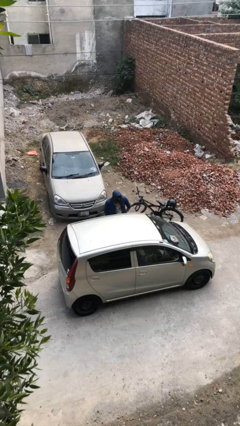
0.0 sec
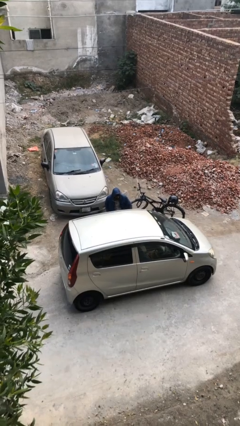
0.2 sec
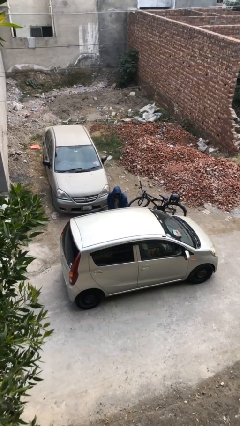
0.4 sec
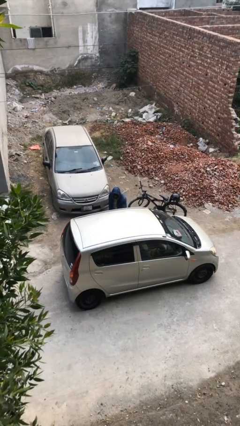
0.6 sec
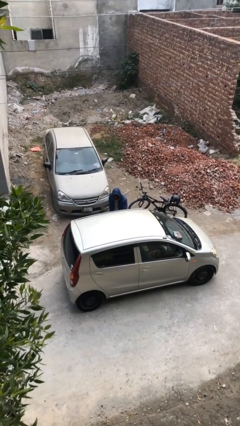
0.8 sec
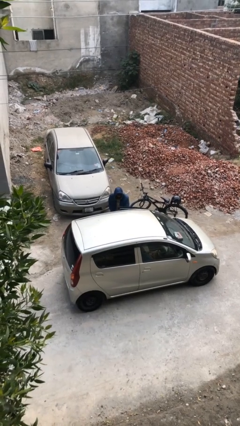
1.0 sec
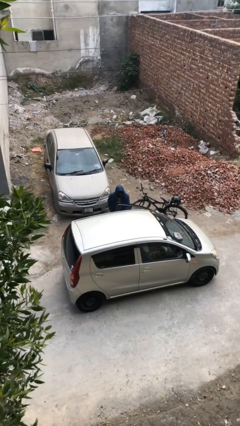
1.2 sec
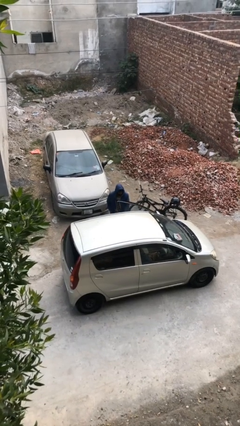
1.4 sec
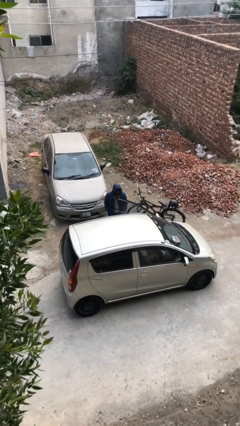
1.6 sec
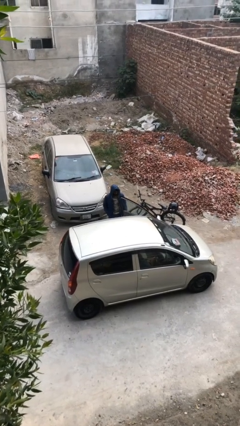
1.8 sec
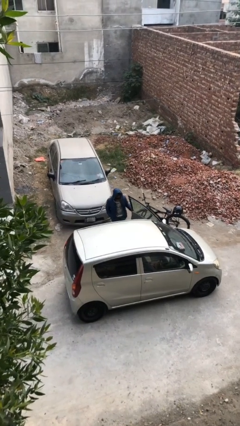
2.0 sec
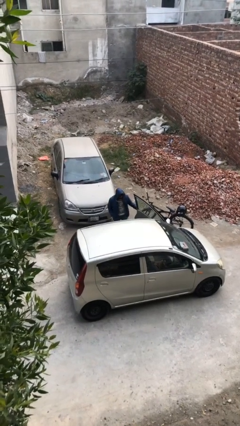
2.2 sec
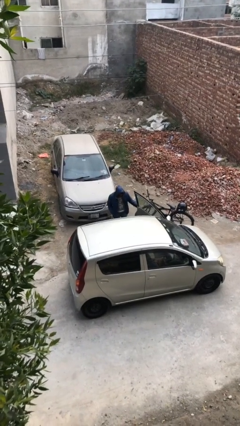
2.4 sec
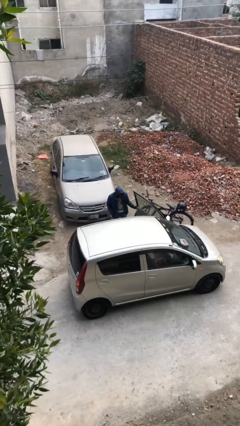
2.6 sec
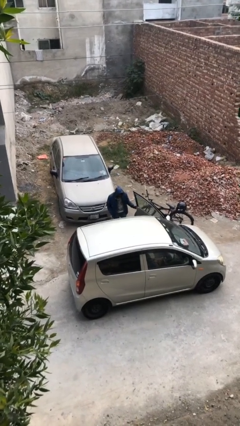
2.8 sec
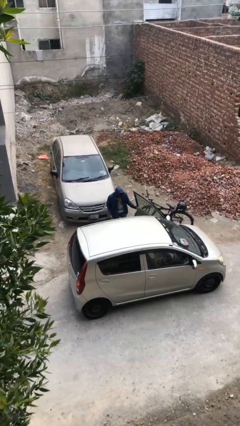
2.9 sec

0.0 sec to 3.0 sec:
person opens car door

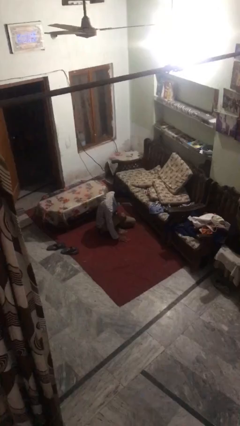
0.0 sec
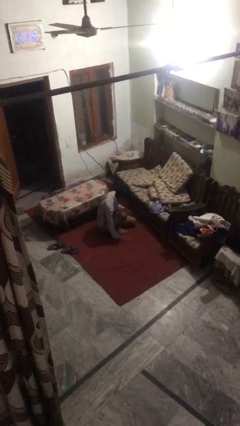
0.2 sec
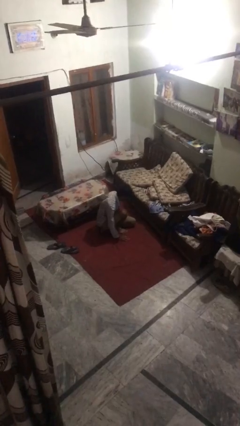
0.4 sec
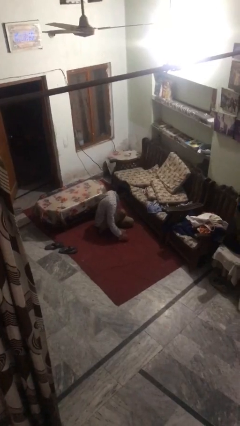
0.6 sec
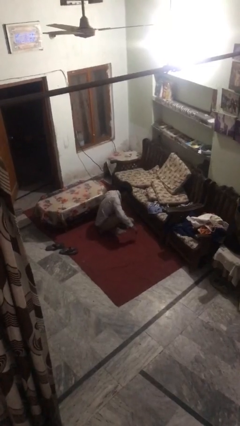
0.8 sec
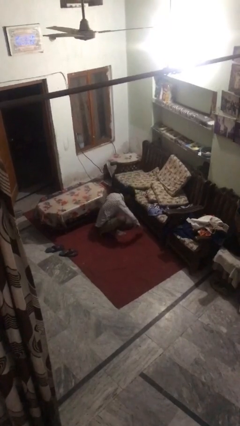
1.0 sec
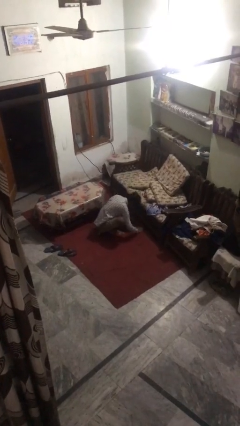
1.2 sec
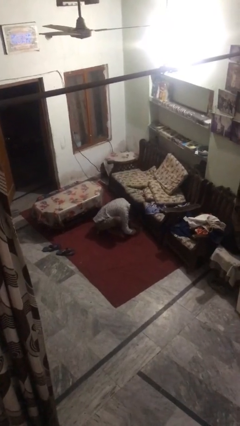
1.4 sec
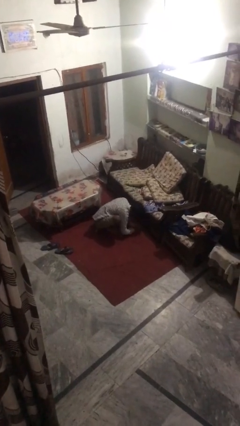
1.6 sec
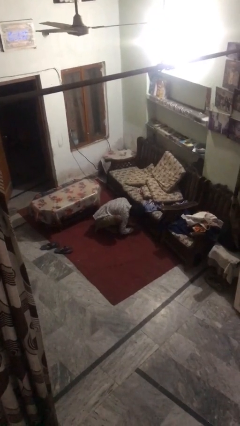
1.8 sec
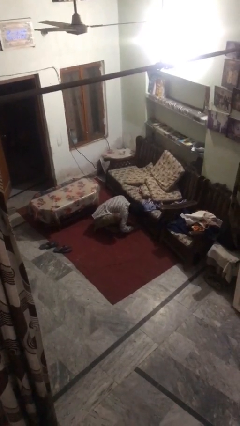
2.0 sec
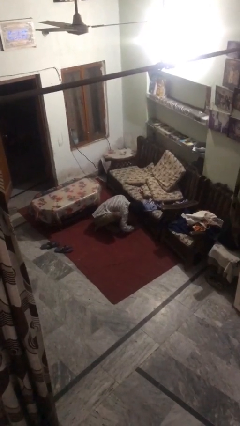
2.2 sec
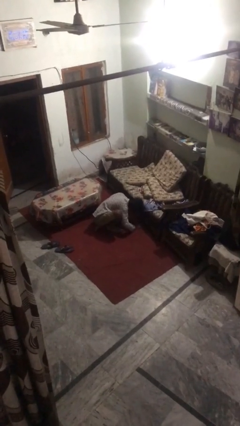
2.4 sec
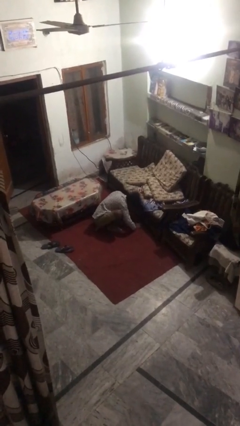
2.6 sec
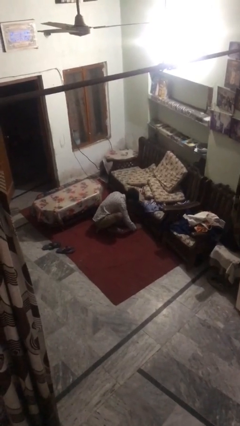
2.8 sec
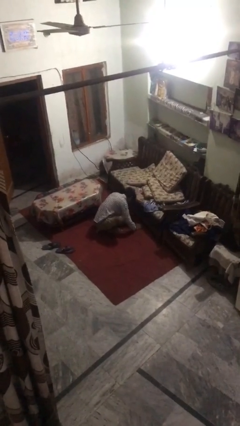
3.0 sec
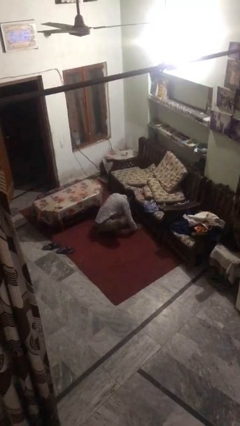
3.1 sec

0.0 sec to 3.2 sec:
person searches under couch

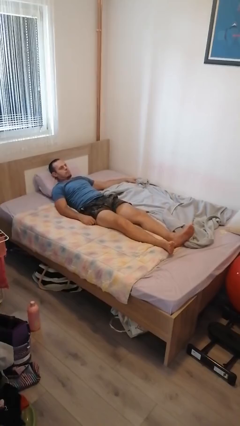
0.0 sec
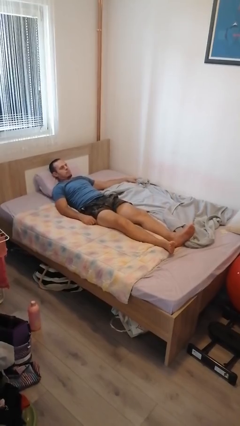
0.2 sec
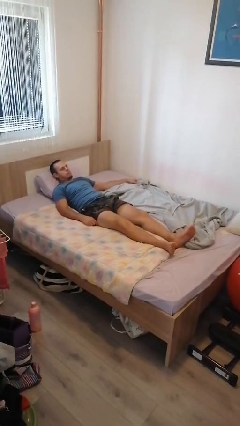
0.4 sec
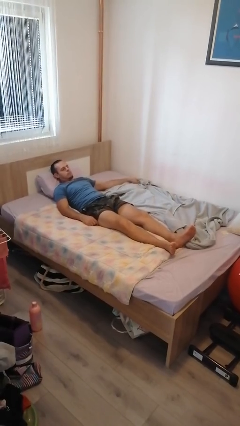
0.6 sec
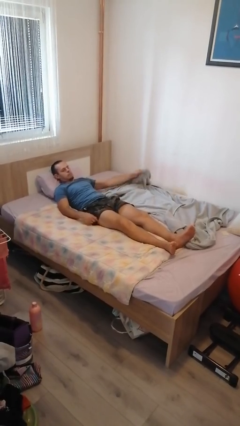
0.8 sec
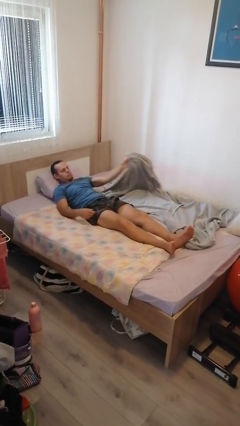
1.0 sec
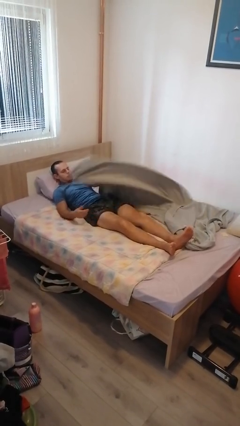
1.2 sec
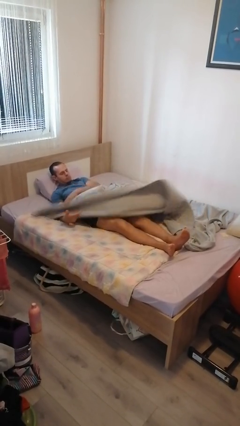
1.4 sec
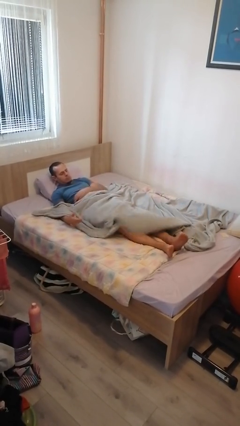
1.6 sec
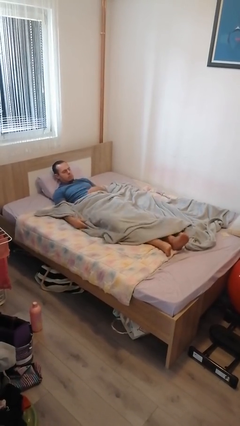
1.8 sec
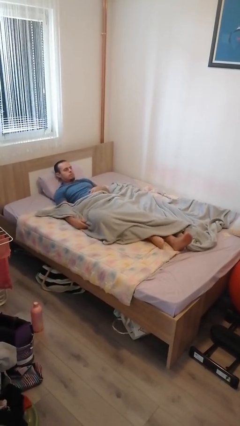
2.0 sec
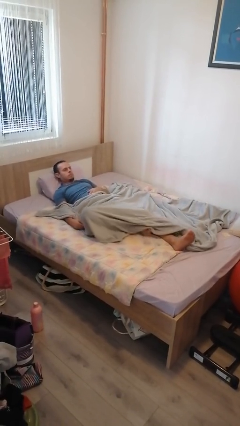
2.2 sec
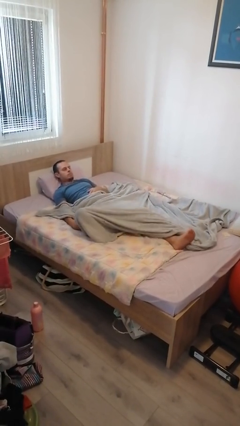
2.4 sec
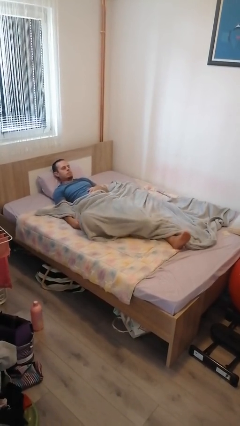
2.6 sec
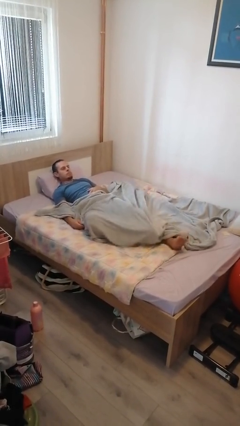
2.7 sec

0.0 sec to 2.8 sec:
person covers with bedsheets

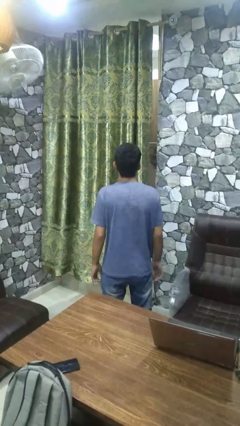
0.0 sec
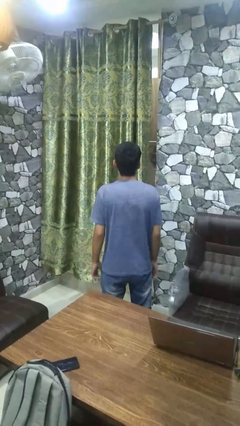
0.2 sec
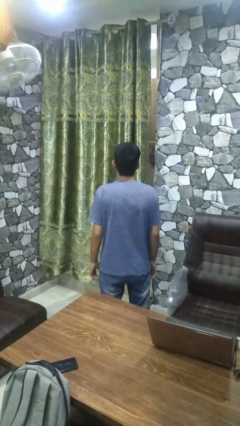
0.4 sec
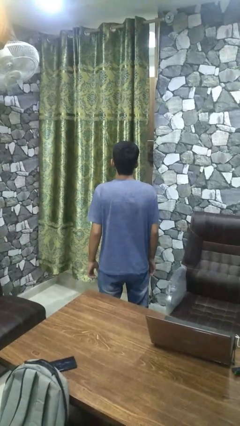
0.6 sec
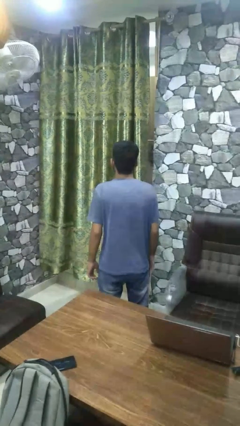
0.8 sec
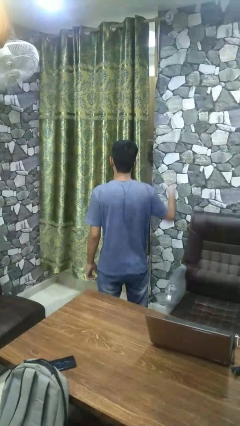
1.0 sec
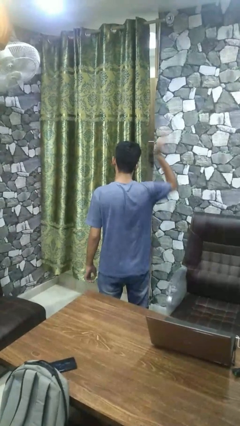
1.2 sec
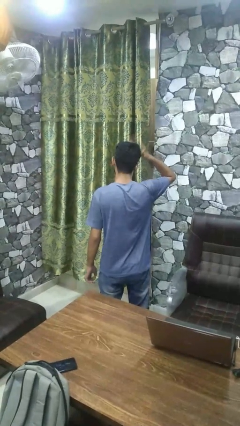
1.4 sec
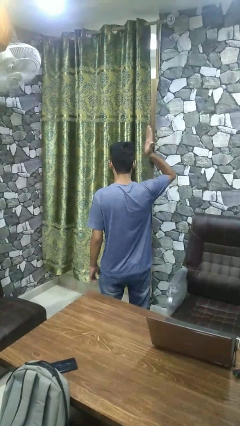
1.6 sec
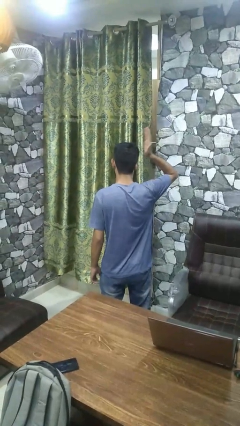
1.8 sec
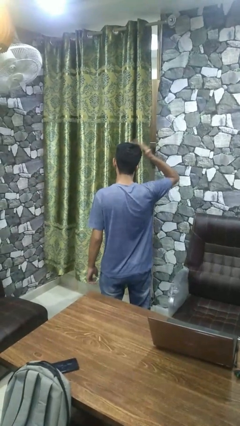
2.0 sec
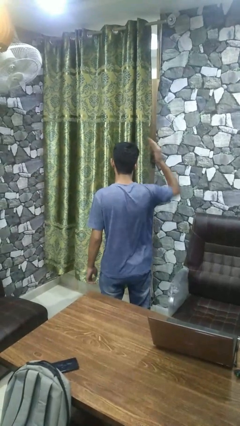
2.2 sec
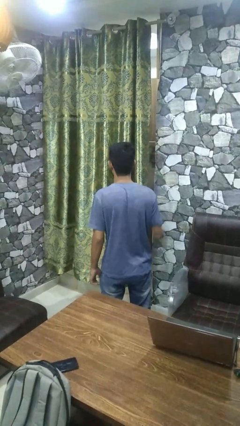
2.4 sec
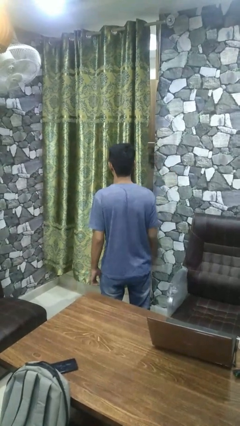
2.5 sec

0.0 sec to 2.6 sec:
person pats head

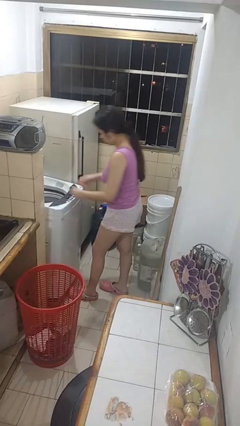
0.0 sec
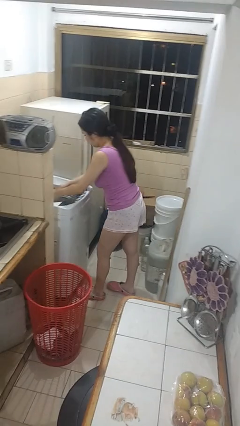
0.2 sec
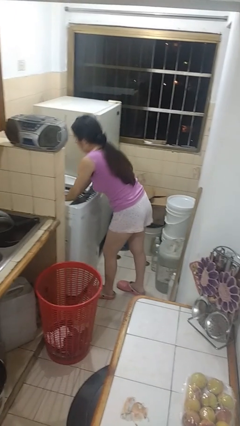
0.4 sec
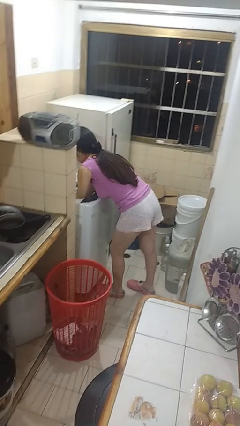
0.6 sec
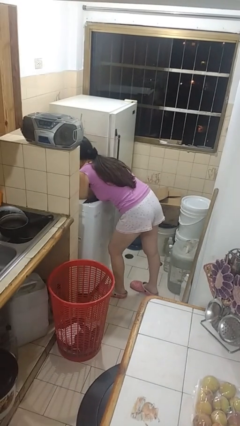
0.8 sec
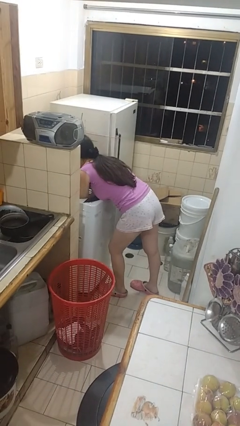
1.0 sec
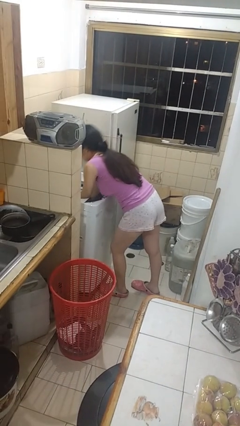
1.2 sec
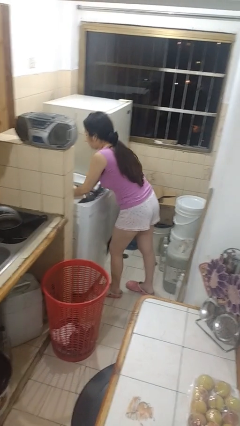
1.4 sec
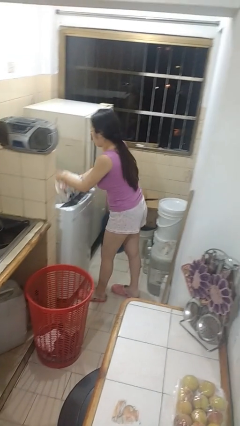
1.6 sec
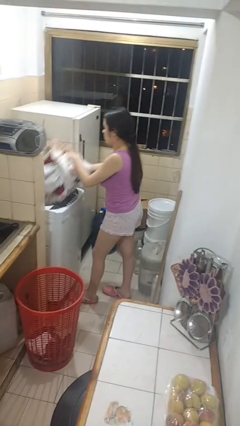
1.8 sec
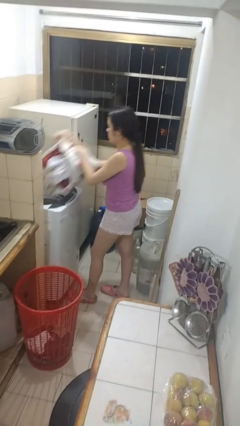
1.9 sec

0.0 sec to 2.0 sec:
person unloads clotheswasher

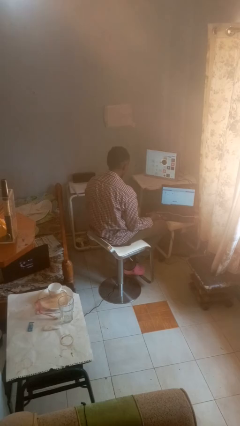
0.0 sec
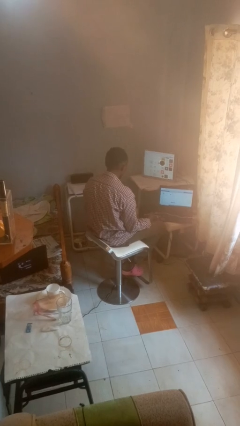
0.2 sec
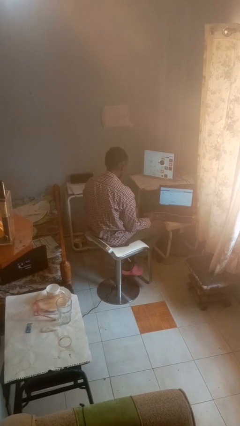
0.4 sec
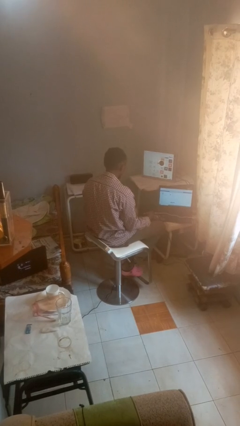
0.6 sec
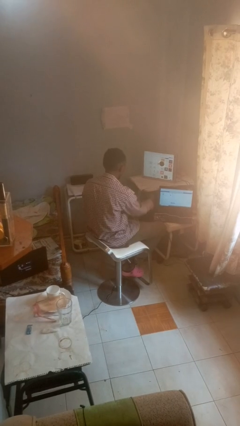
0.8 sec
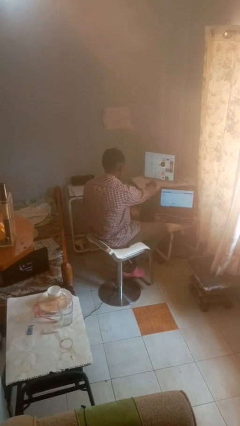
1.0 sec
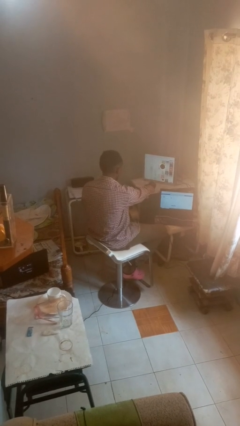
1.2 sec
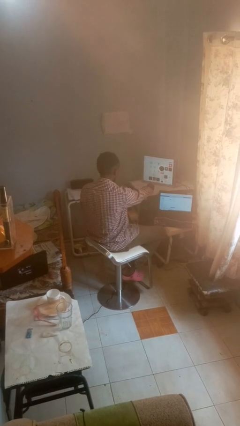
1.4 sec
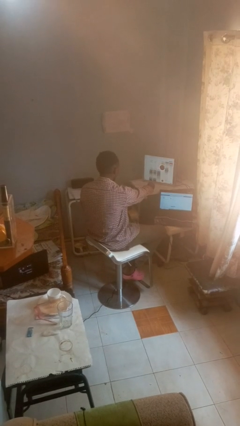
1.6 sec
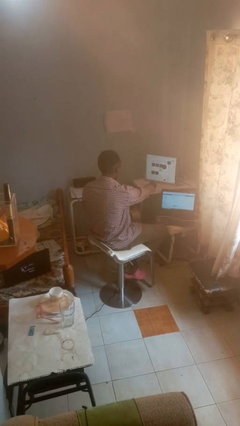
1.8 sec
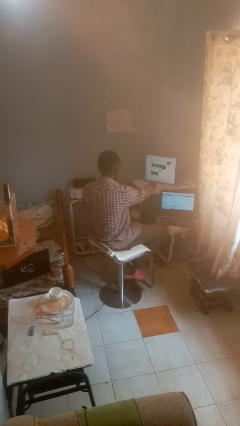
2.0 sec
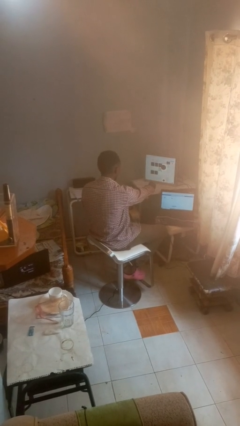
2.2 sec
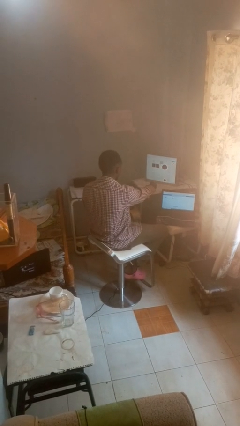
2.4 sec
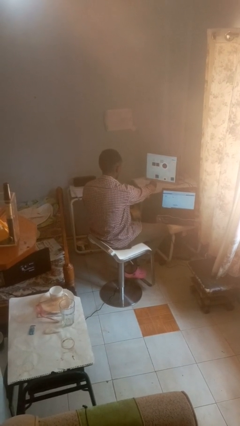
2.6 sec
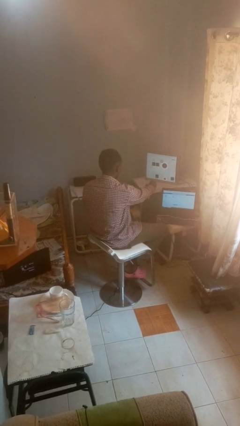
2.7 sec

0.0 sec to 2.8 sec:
person uses television remote

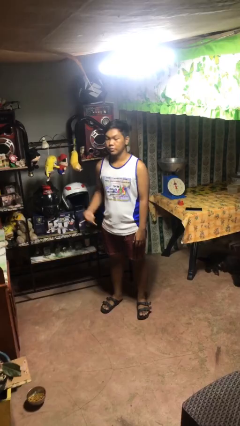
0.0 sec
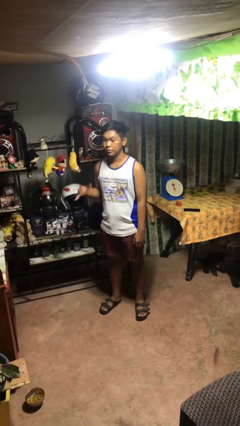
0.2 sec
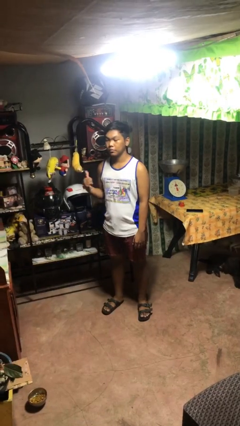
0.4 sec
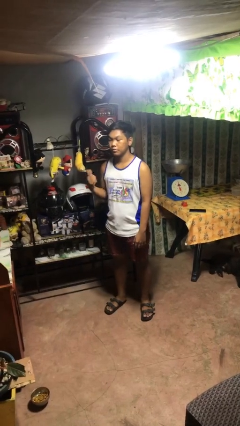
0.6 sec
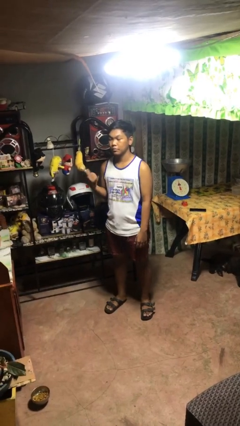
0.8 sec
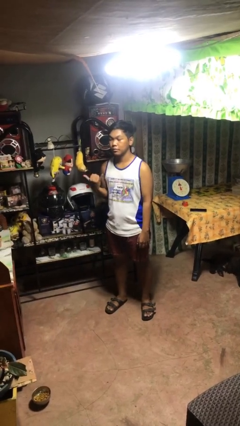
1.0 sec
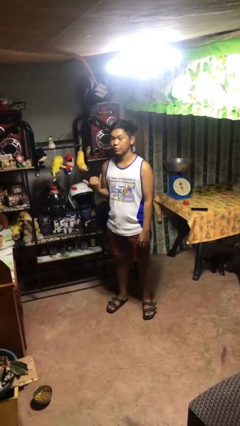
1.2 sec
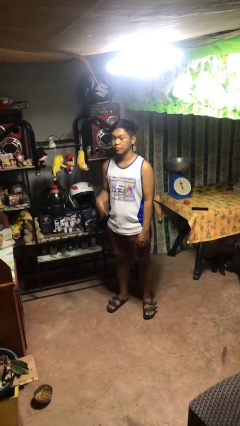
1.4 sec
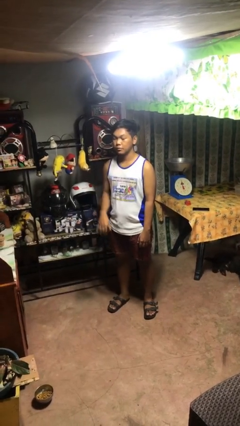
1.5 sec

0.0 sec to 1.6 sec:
person gestures hang loose
